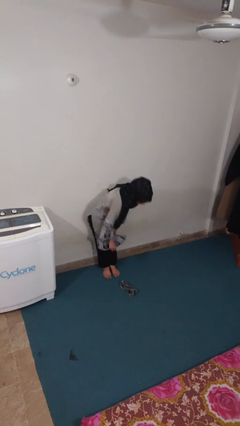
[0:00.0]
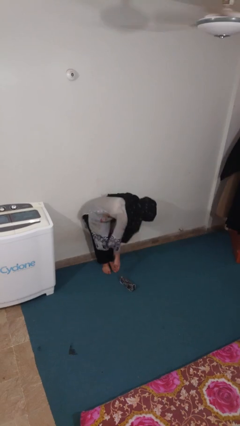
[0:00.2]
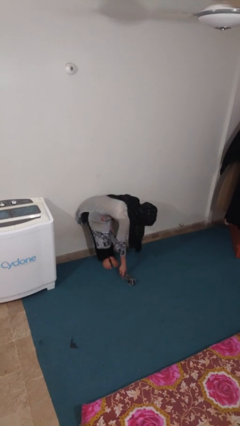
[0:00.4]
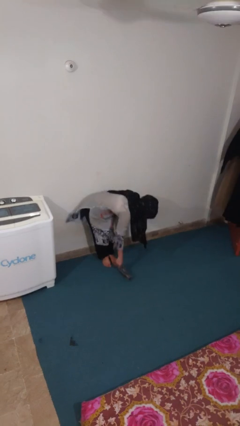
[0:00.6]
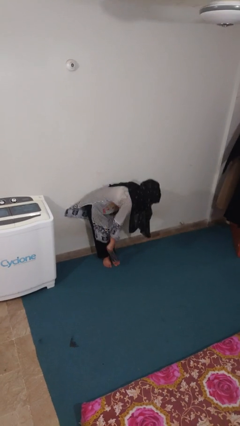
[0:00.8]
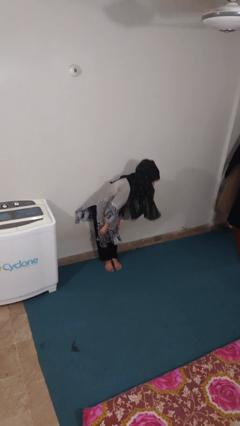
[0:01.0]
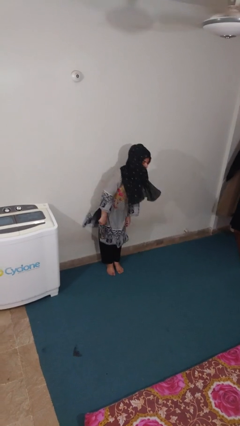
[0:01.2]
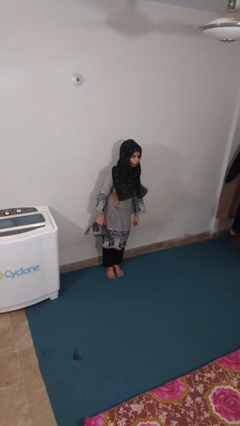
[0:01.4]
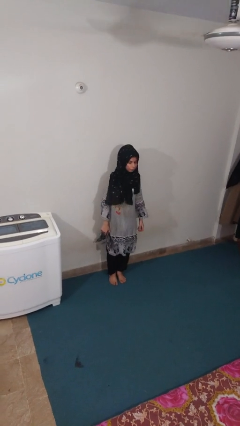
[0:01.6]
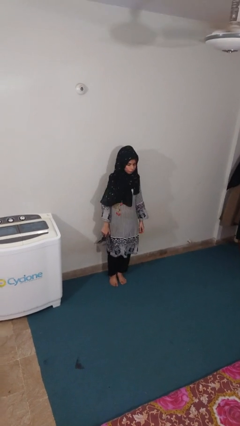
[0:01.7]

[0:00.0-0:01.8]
person picks up object from floor

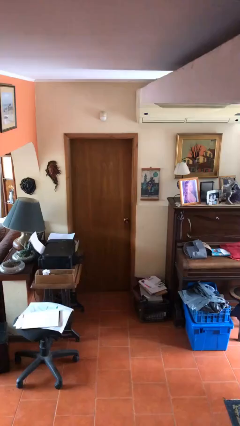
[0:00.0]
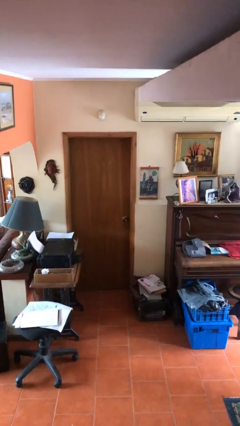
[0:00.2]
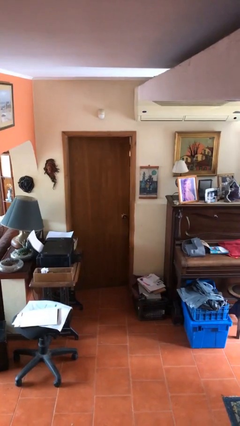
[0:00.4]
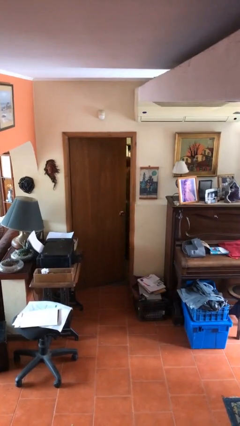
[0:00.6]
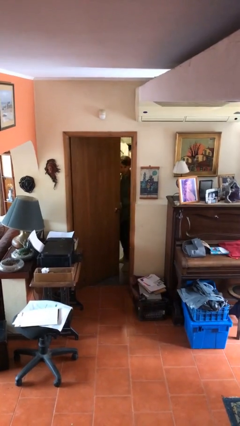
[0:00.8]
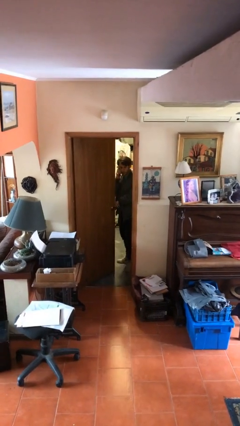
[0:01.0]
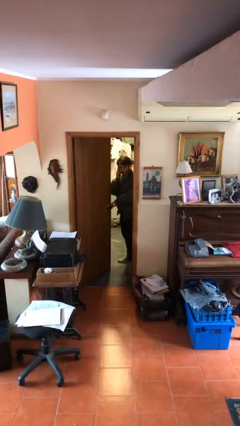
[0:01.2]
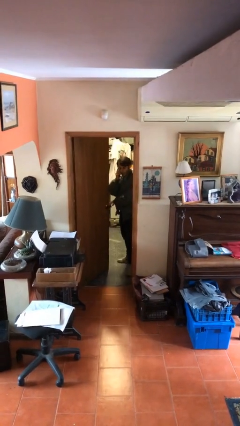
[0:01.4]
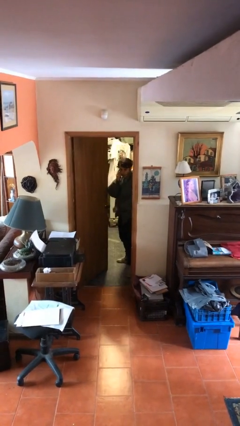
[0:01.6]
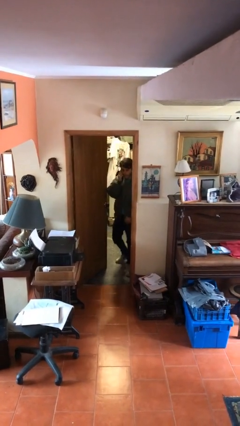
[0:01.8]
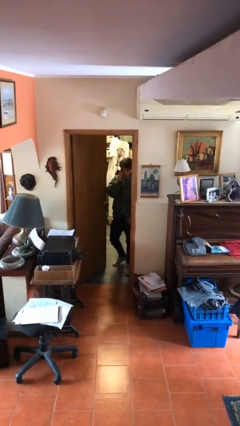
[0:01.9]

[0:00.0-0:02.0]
person opens facility door

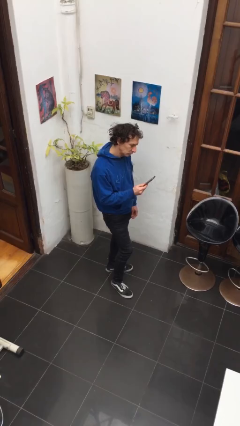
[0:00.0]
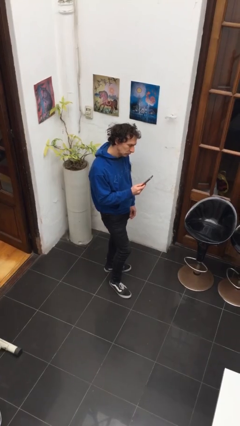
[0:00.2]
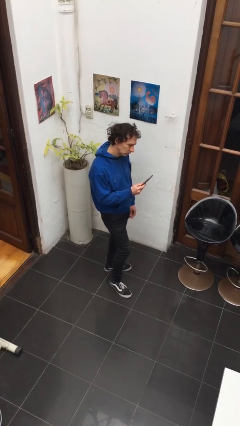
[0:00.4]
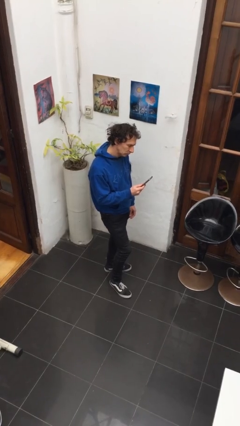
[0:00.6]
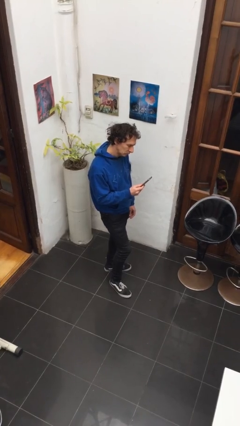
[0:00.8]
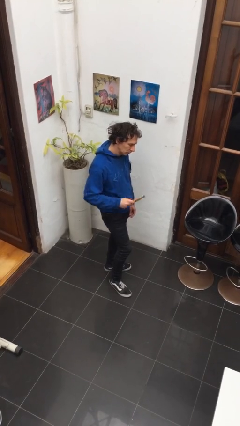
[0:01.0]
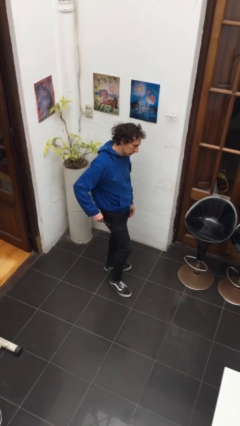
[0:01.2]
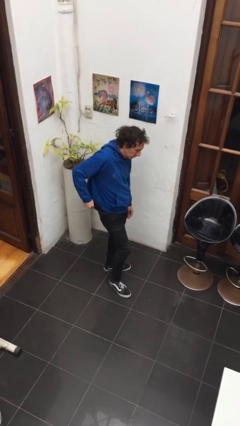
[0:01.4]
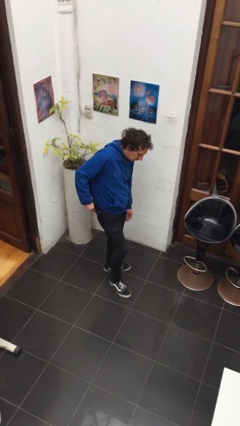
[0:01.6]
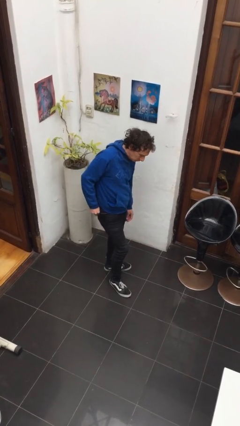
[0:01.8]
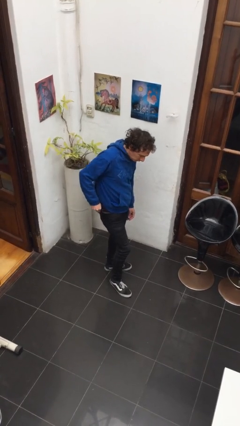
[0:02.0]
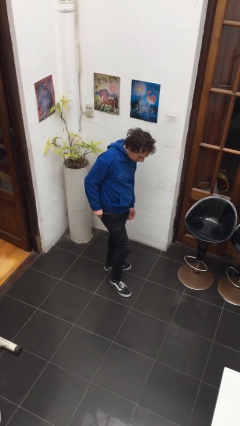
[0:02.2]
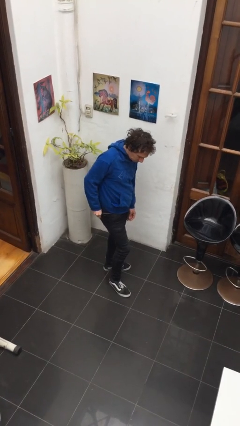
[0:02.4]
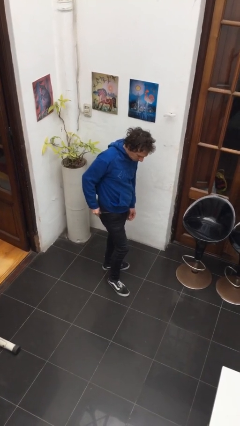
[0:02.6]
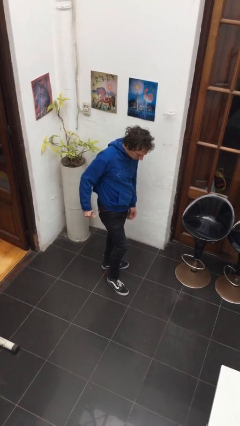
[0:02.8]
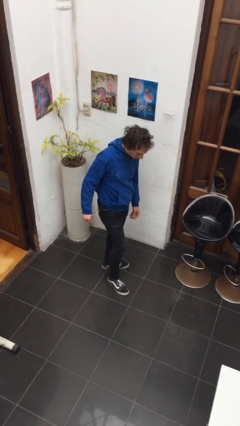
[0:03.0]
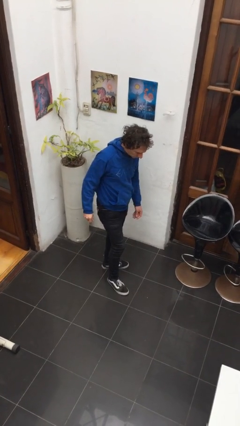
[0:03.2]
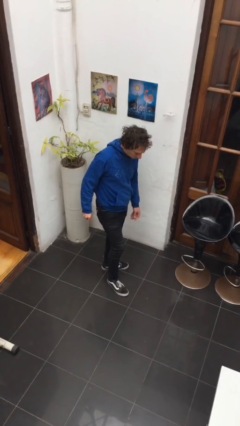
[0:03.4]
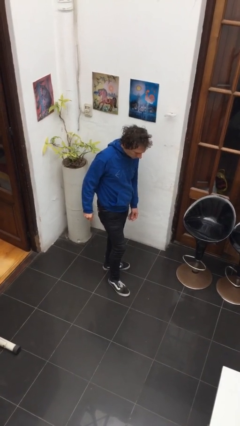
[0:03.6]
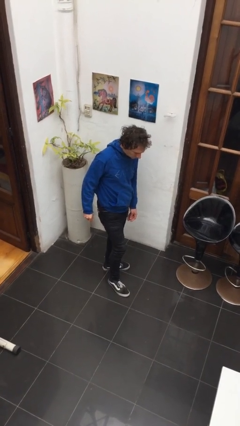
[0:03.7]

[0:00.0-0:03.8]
person puts phone into pocket

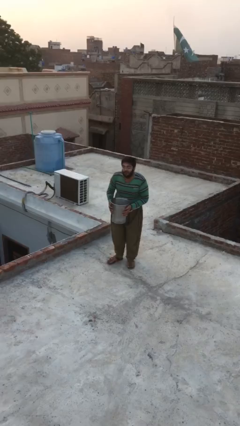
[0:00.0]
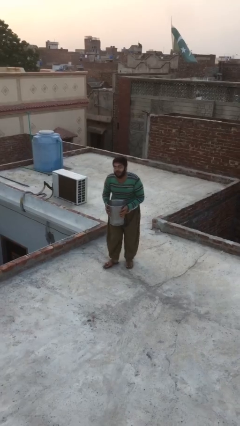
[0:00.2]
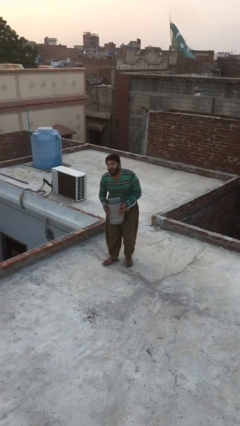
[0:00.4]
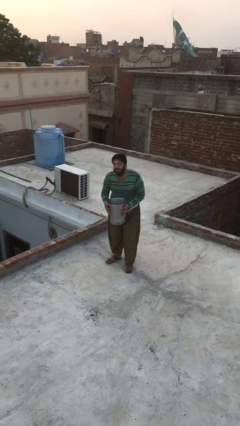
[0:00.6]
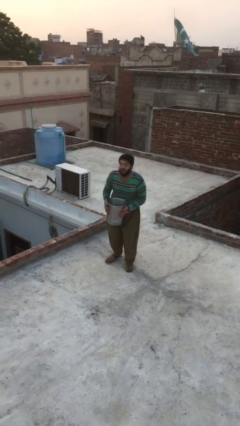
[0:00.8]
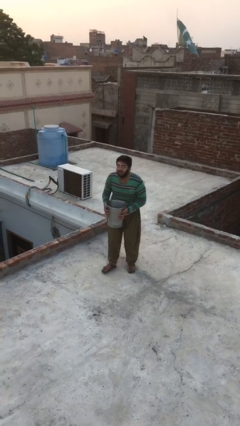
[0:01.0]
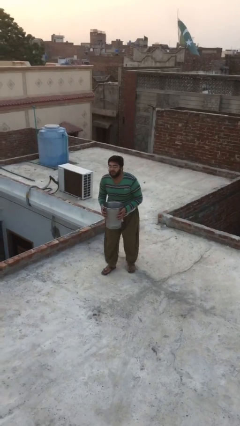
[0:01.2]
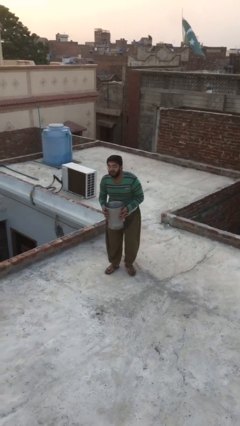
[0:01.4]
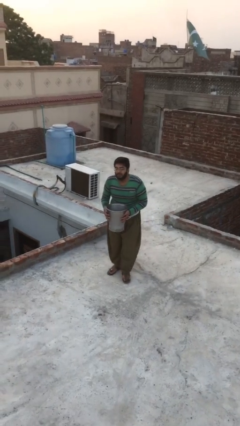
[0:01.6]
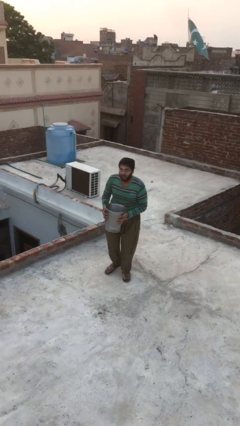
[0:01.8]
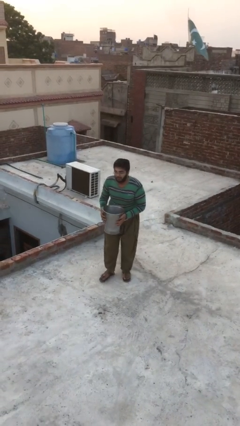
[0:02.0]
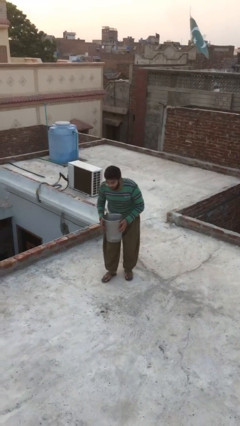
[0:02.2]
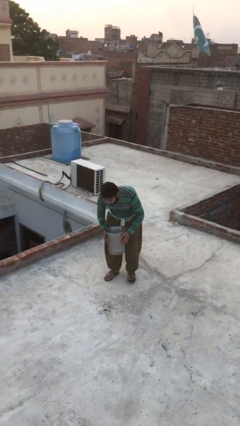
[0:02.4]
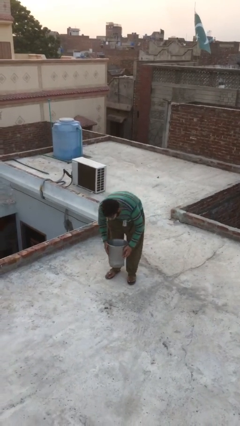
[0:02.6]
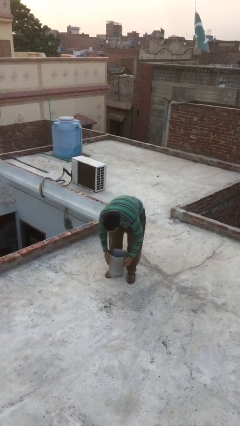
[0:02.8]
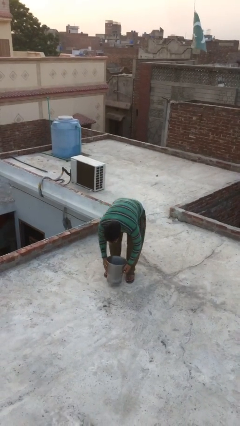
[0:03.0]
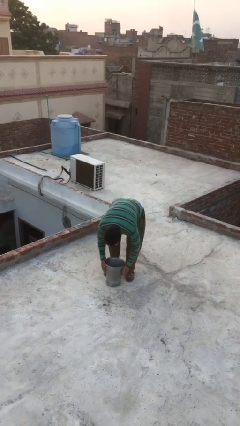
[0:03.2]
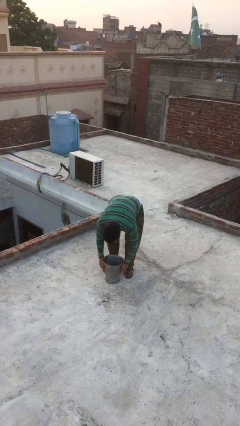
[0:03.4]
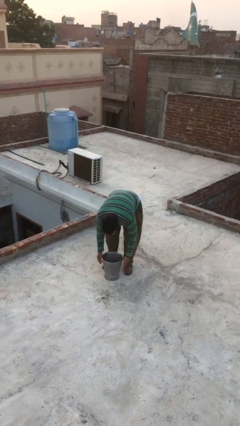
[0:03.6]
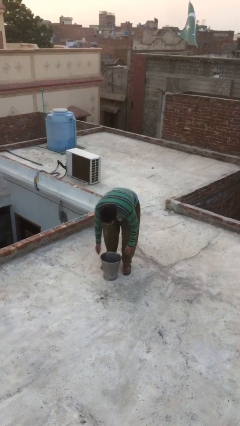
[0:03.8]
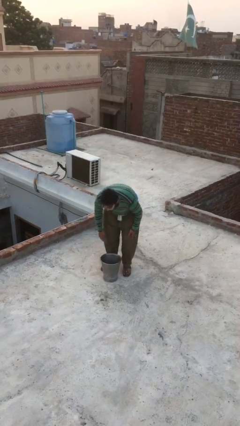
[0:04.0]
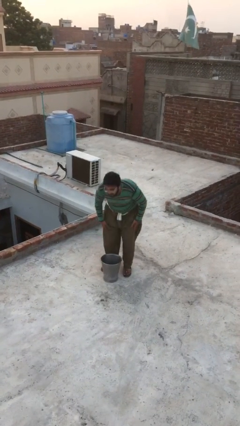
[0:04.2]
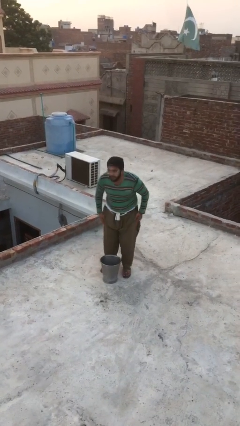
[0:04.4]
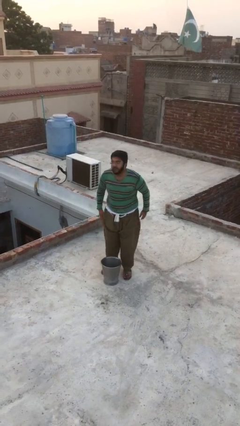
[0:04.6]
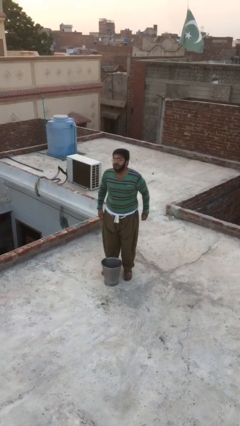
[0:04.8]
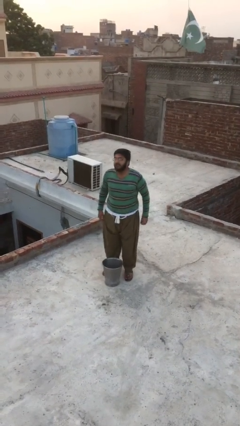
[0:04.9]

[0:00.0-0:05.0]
person puts down object on floor

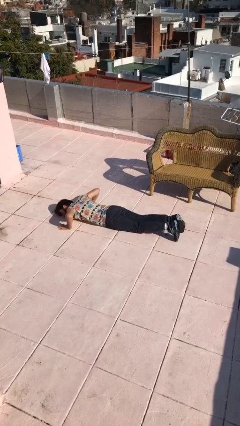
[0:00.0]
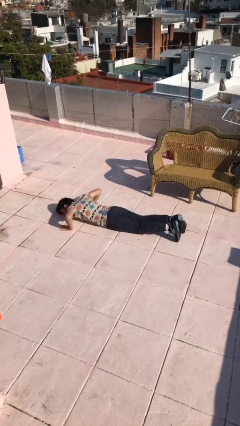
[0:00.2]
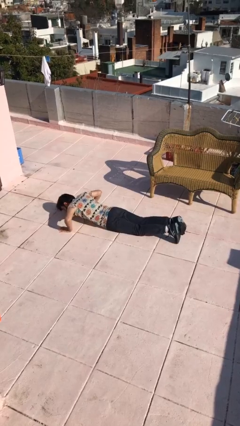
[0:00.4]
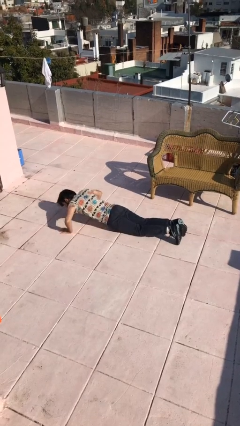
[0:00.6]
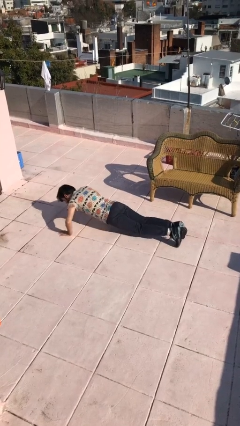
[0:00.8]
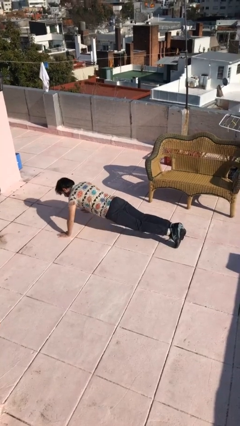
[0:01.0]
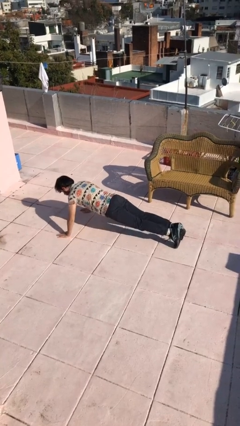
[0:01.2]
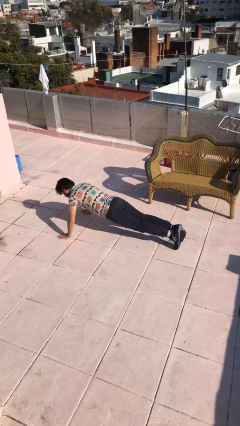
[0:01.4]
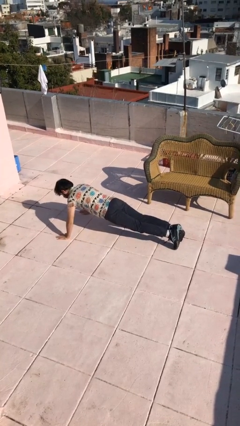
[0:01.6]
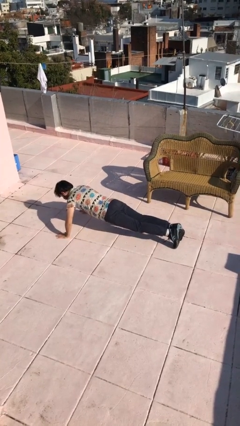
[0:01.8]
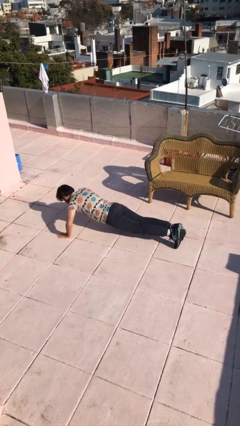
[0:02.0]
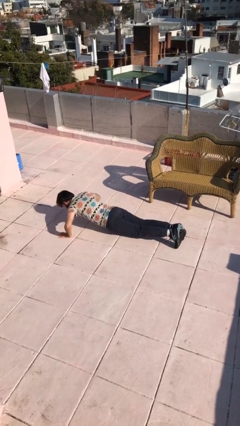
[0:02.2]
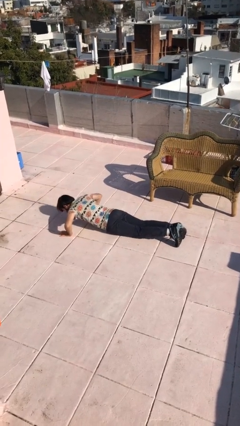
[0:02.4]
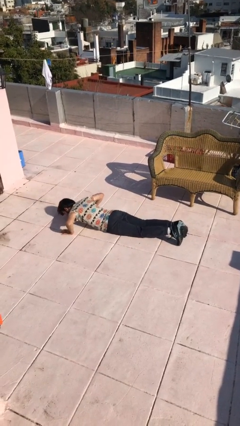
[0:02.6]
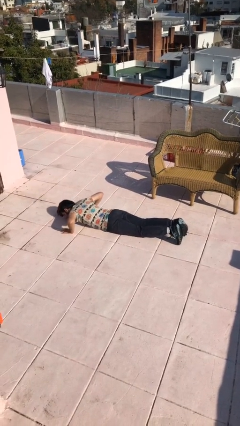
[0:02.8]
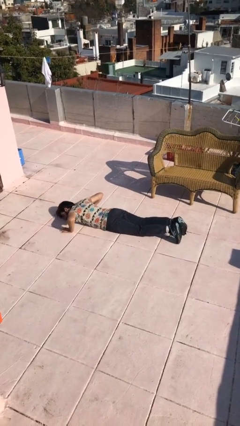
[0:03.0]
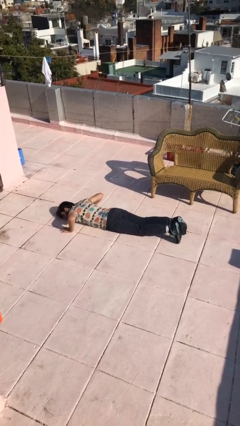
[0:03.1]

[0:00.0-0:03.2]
person exercises with pushup

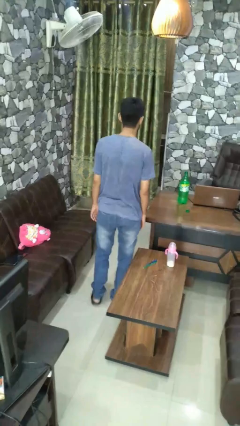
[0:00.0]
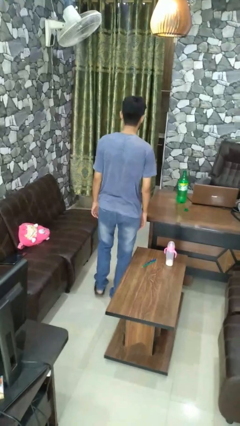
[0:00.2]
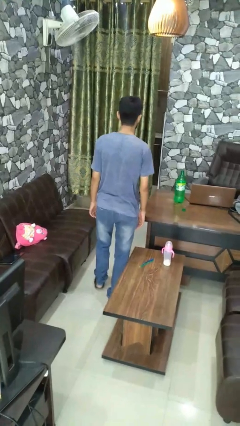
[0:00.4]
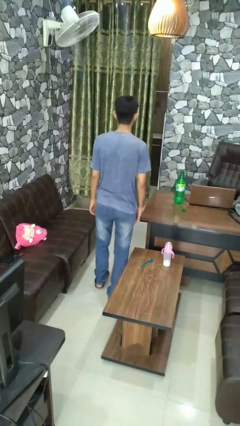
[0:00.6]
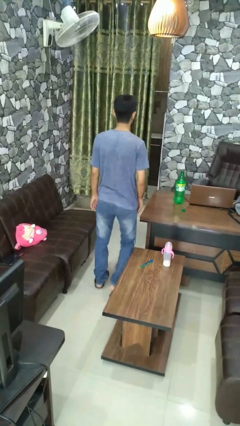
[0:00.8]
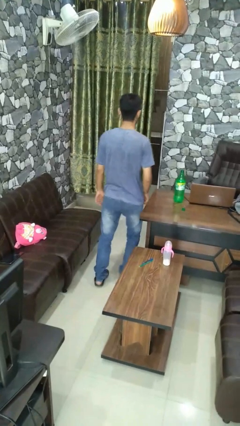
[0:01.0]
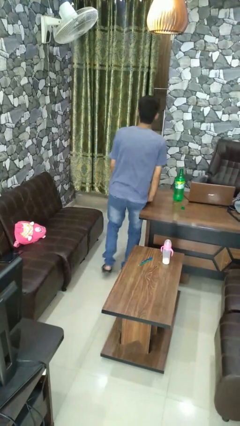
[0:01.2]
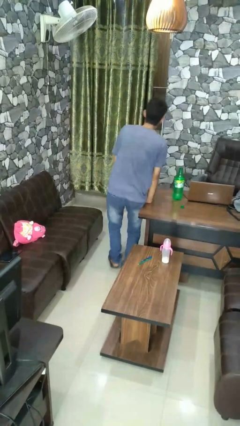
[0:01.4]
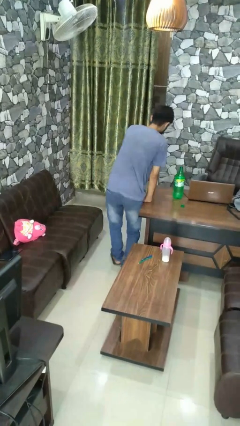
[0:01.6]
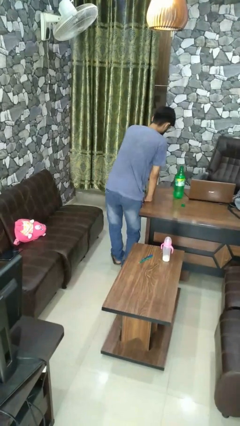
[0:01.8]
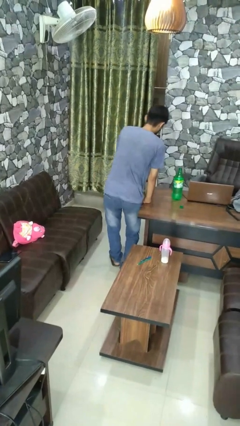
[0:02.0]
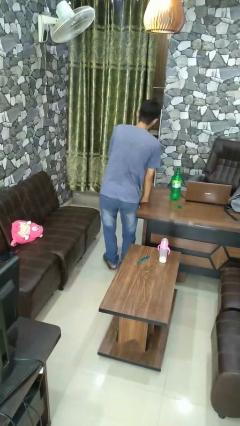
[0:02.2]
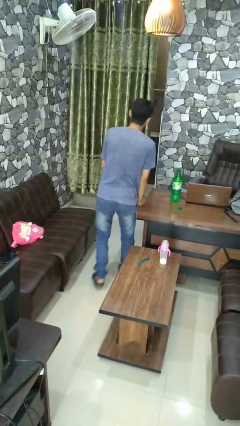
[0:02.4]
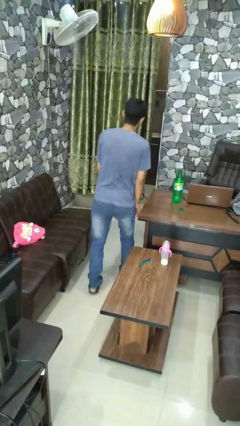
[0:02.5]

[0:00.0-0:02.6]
person bumps into table
